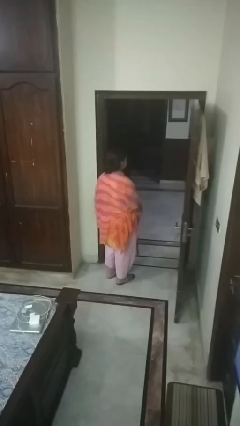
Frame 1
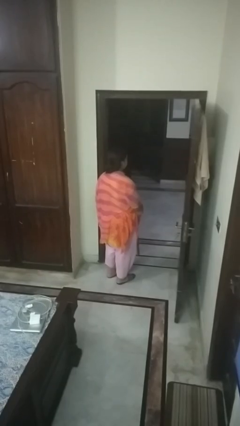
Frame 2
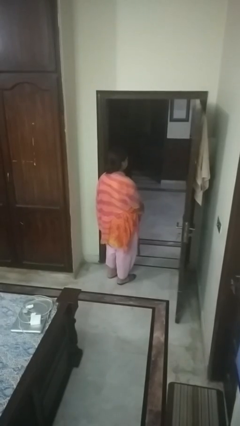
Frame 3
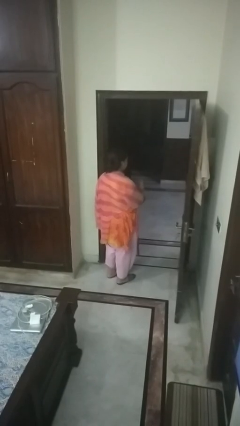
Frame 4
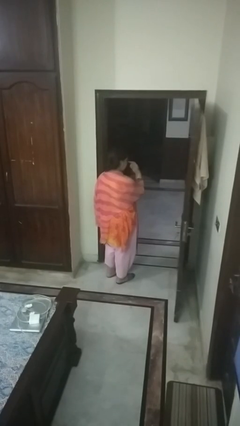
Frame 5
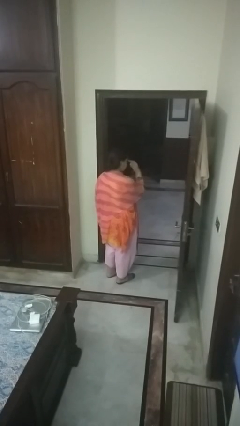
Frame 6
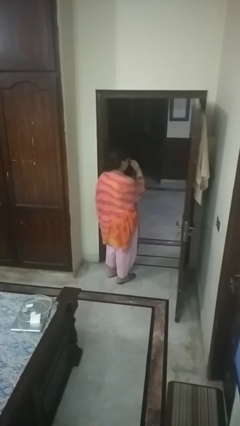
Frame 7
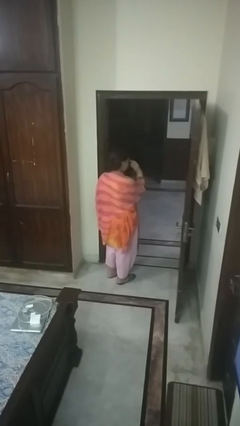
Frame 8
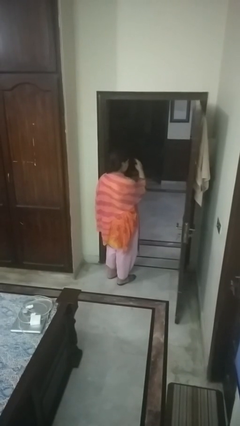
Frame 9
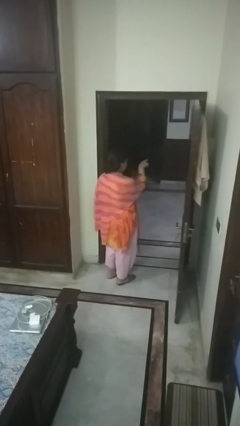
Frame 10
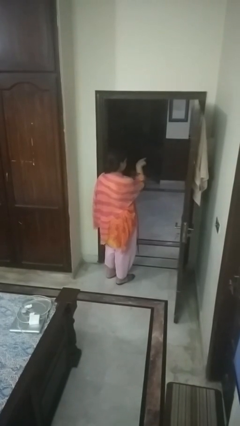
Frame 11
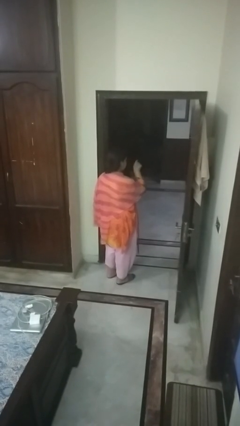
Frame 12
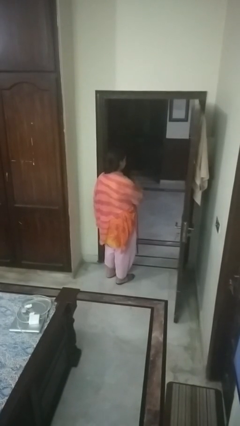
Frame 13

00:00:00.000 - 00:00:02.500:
person gestures watch closely

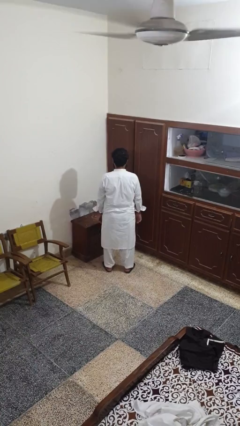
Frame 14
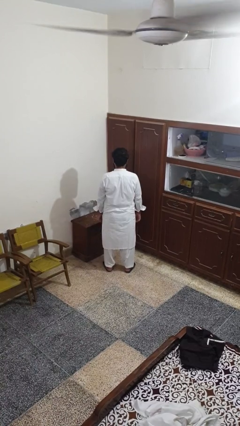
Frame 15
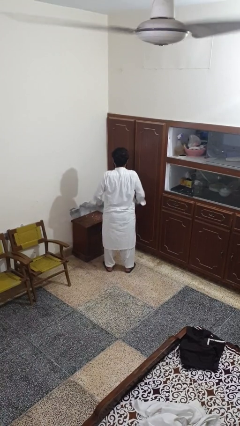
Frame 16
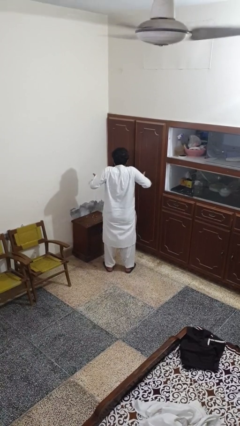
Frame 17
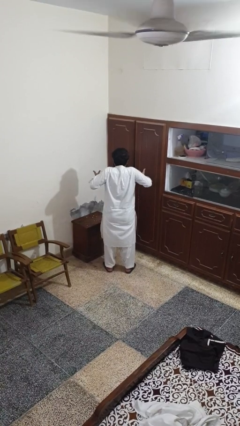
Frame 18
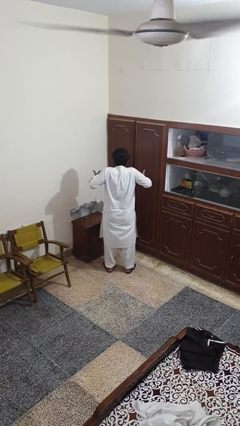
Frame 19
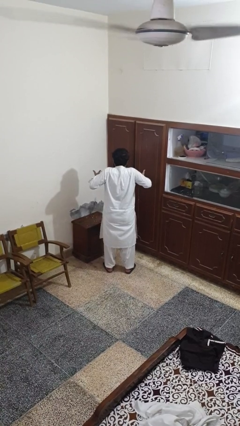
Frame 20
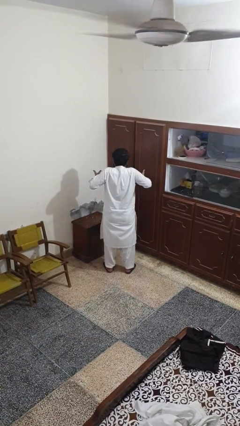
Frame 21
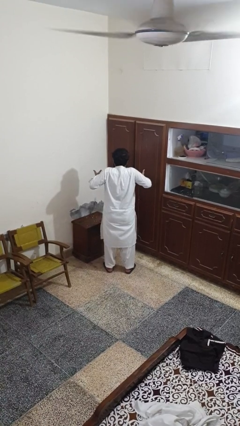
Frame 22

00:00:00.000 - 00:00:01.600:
person shrugs

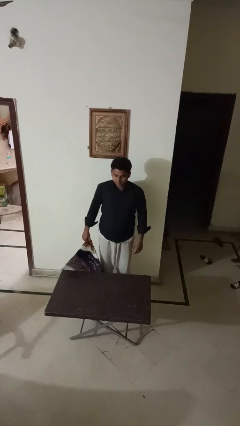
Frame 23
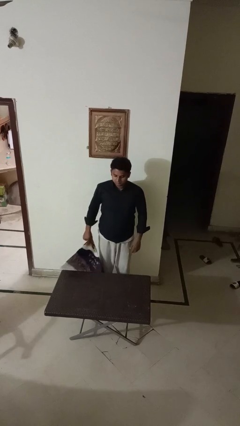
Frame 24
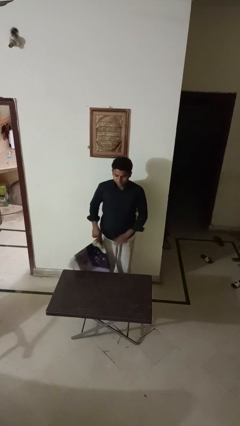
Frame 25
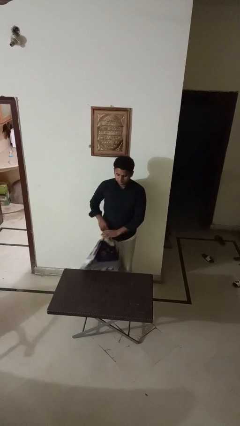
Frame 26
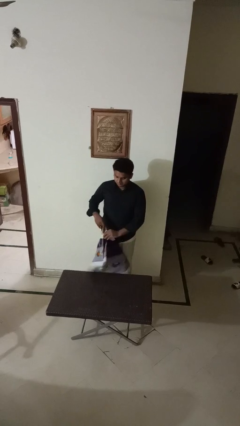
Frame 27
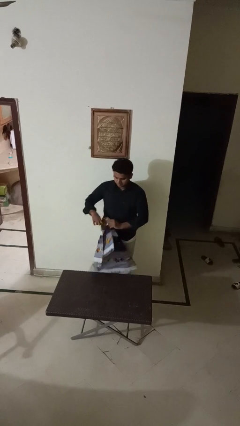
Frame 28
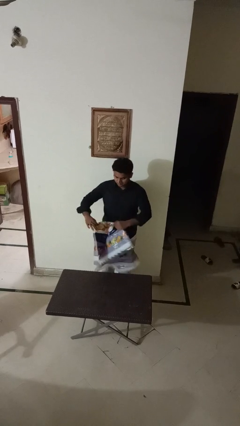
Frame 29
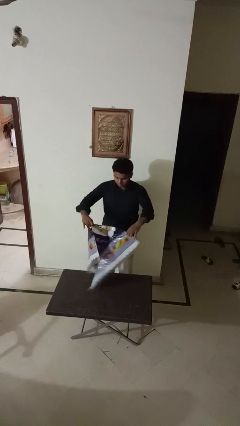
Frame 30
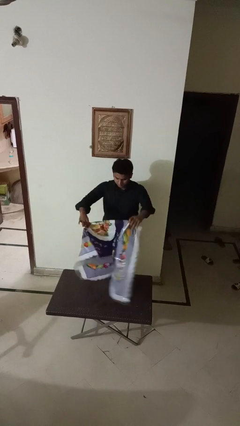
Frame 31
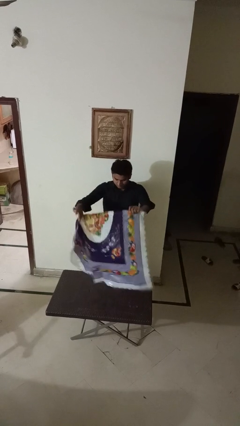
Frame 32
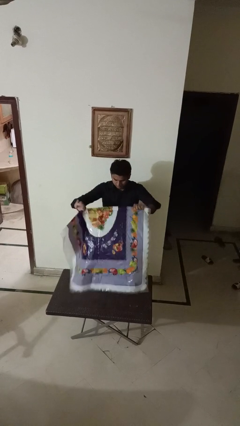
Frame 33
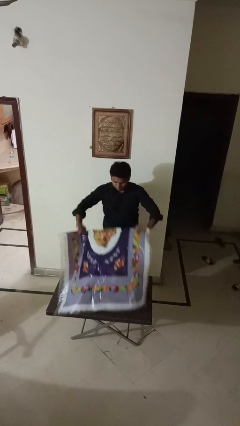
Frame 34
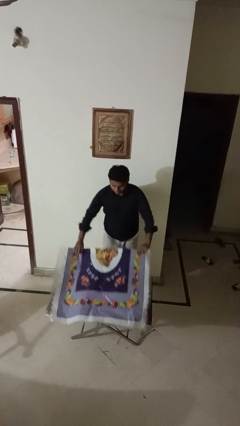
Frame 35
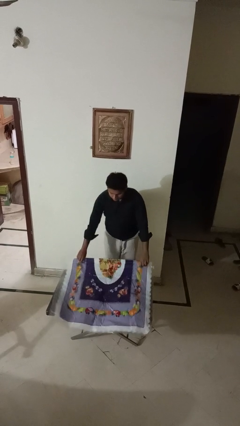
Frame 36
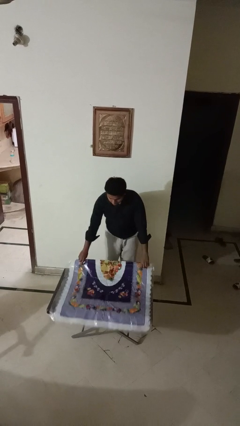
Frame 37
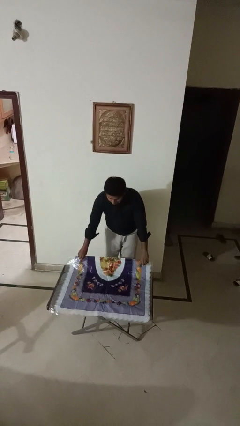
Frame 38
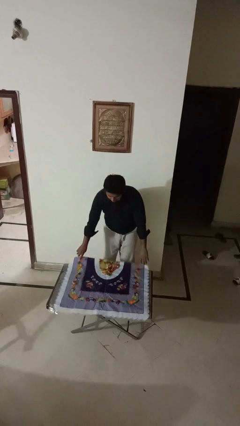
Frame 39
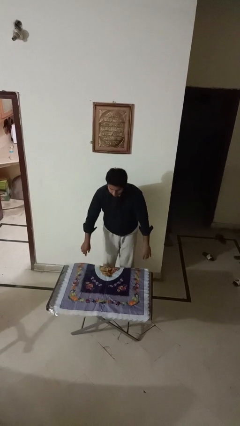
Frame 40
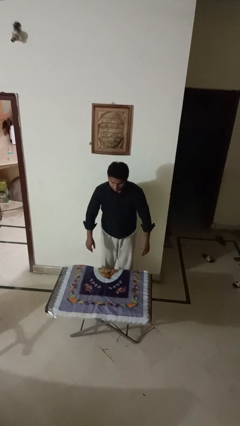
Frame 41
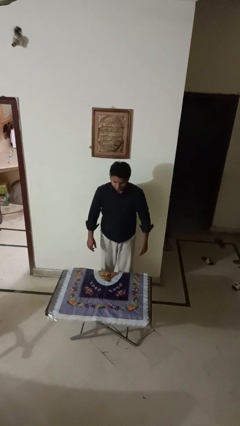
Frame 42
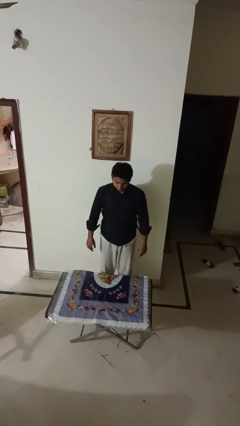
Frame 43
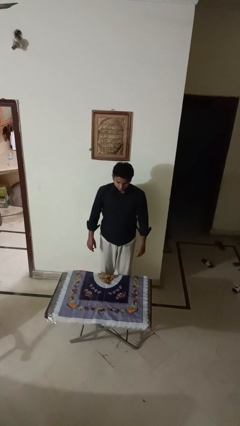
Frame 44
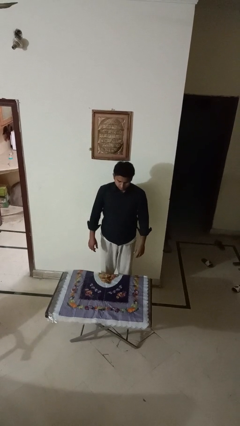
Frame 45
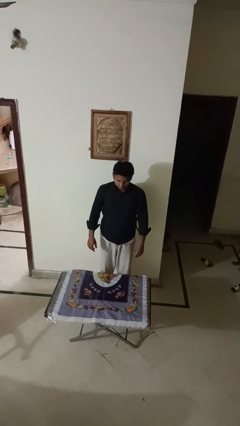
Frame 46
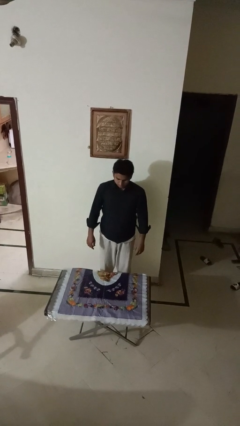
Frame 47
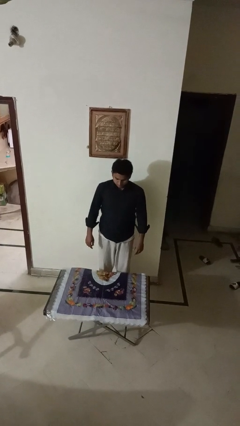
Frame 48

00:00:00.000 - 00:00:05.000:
person spreads tablecloth

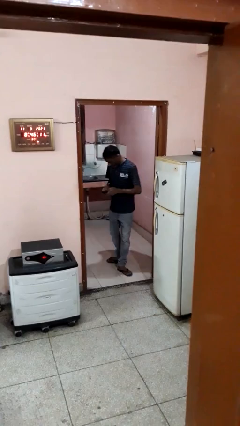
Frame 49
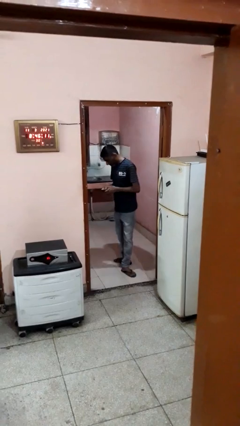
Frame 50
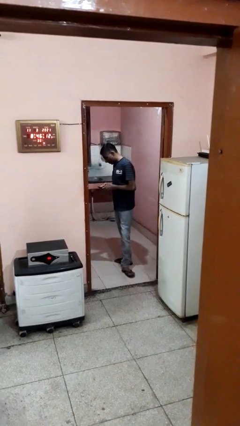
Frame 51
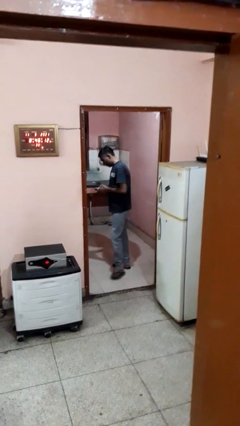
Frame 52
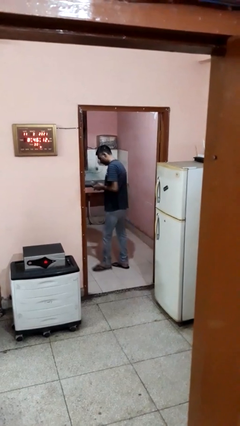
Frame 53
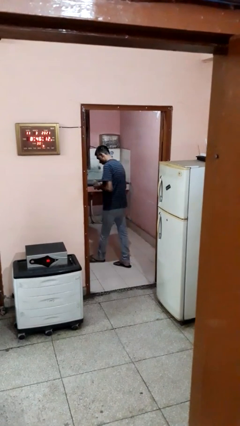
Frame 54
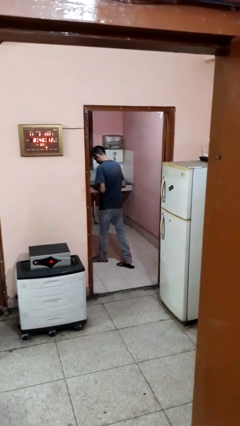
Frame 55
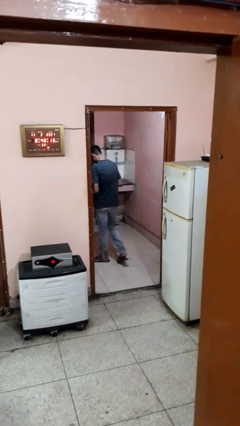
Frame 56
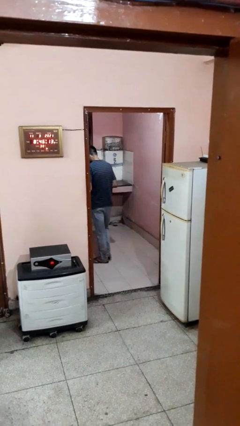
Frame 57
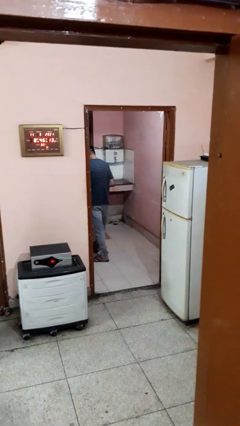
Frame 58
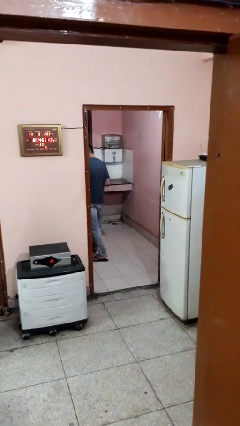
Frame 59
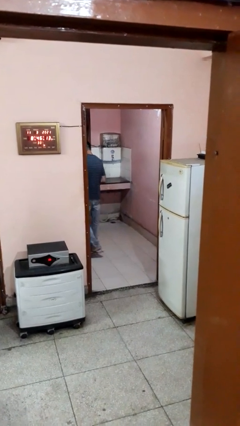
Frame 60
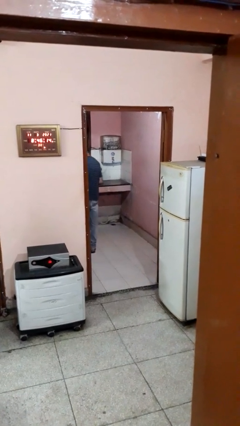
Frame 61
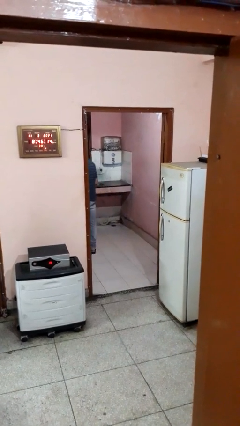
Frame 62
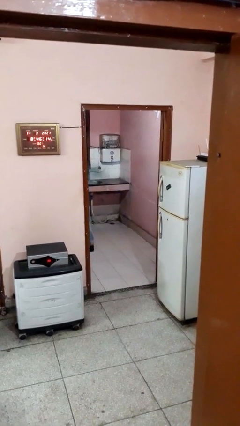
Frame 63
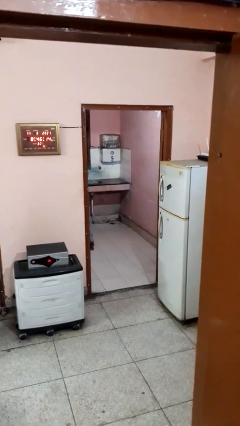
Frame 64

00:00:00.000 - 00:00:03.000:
person exits scene through structure

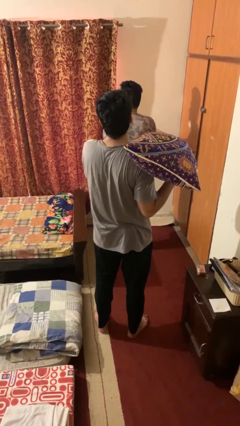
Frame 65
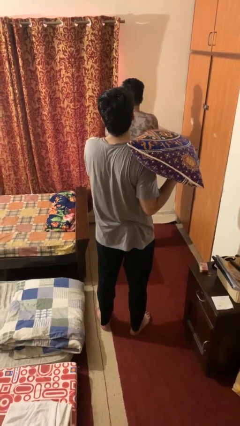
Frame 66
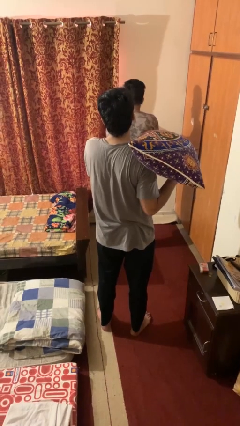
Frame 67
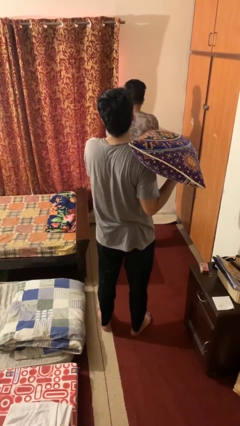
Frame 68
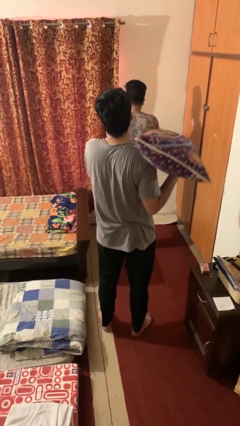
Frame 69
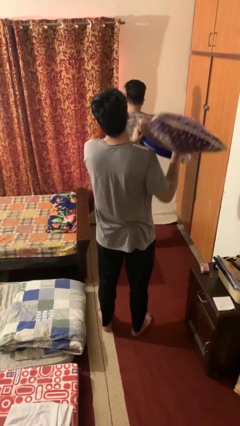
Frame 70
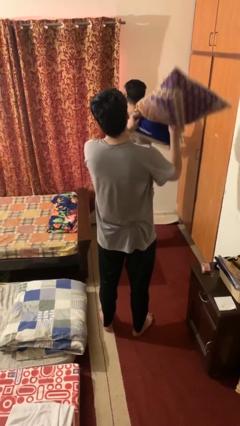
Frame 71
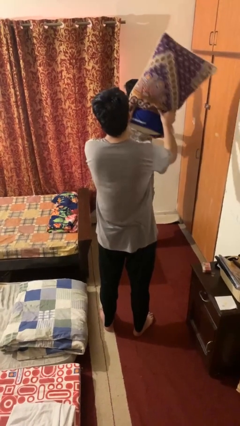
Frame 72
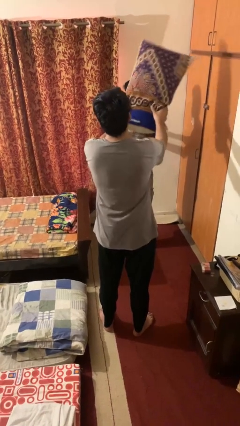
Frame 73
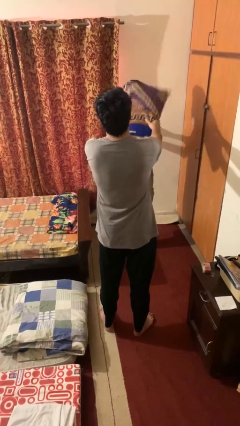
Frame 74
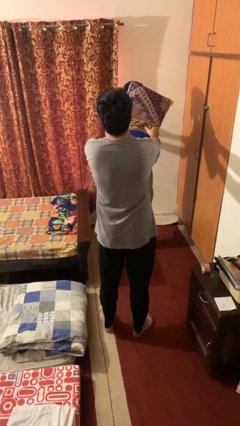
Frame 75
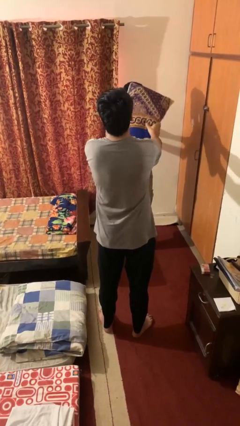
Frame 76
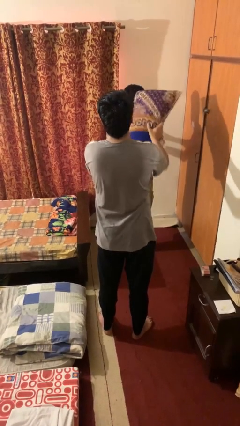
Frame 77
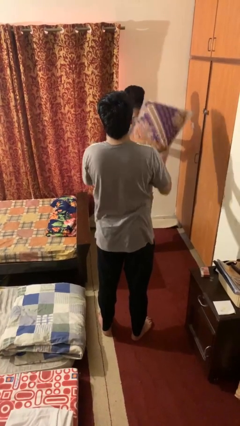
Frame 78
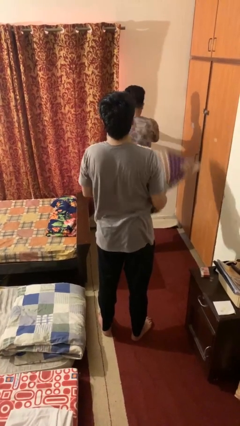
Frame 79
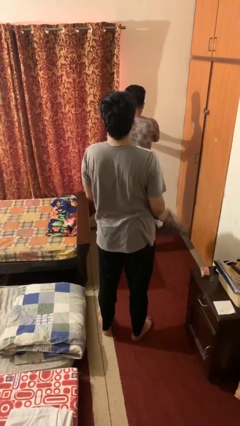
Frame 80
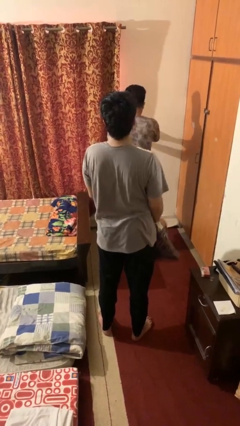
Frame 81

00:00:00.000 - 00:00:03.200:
person hits person with pillow

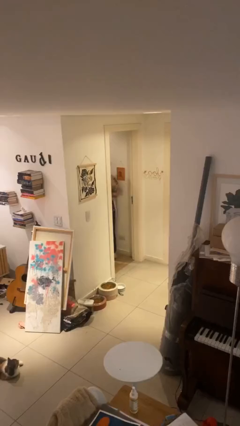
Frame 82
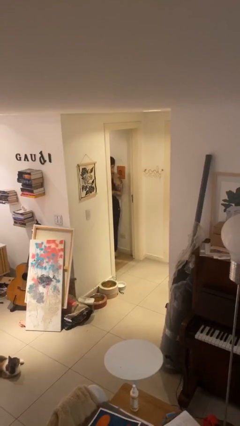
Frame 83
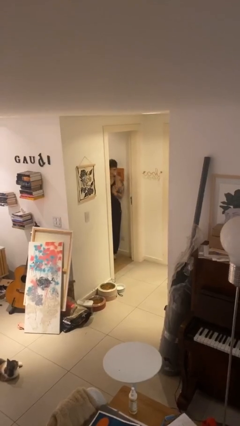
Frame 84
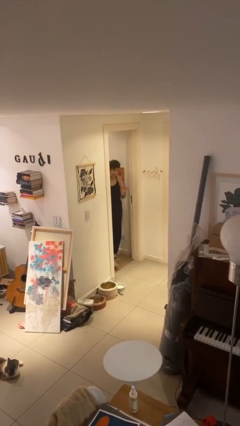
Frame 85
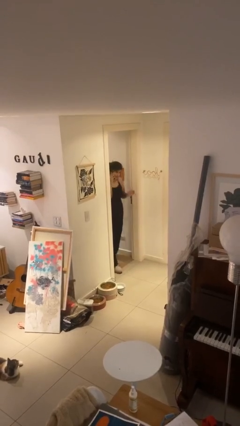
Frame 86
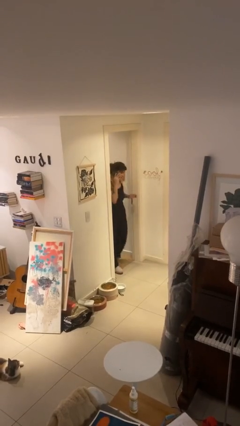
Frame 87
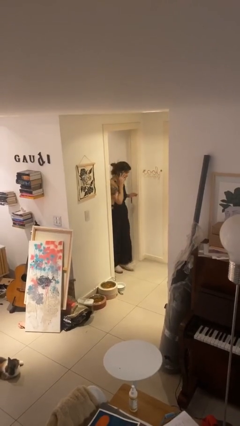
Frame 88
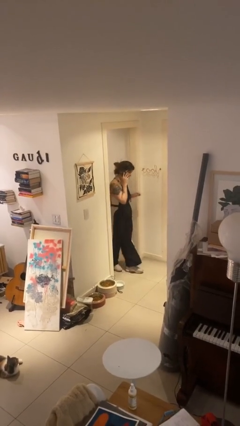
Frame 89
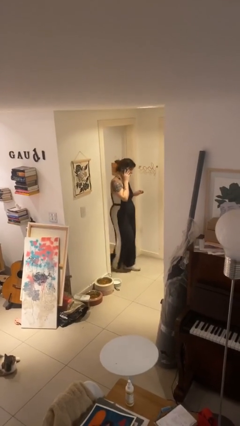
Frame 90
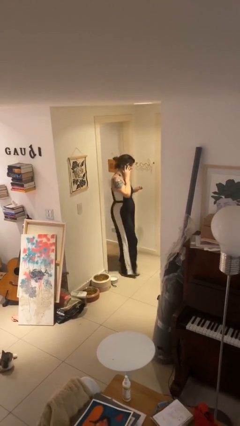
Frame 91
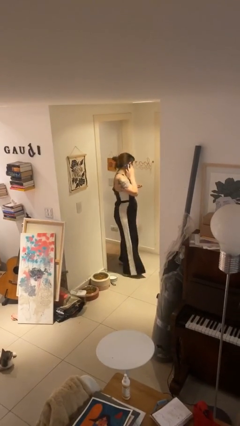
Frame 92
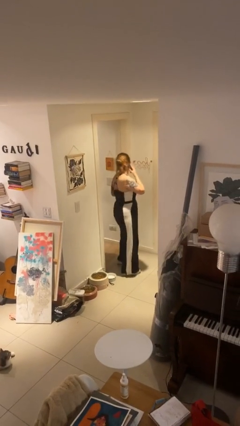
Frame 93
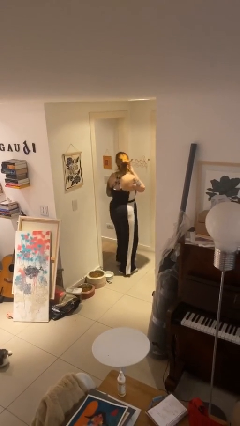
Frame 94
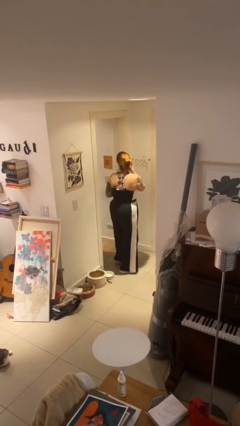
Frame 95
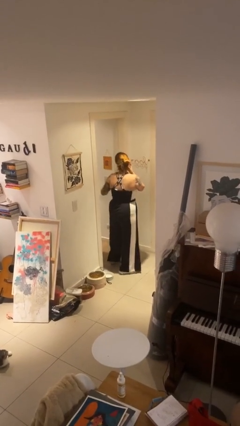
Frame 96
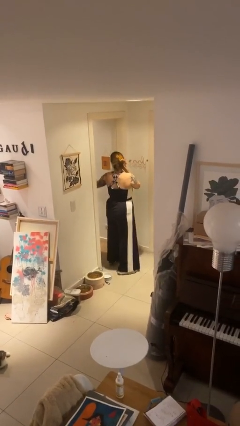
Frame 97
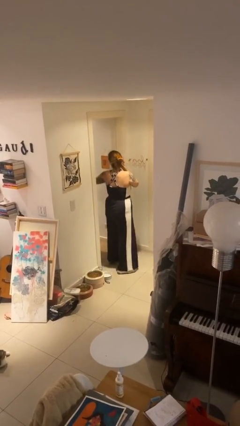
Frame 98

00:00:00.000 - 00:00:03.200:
person enters scene through structure
